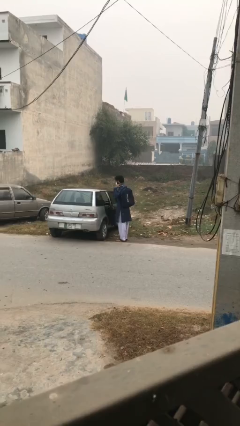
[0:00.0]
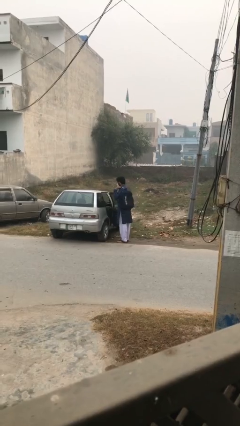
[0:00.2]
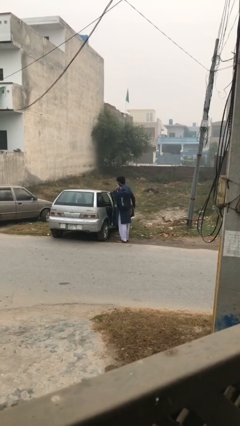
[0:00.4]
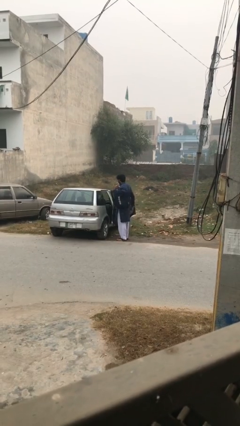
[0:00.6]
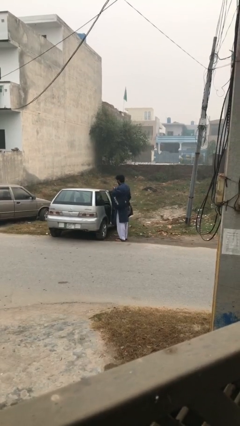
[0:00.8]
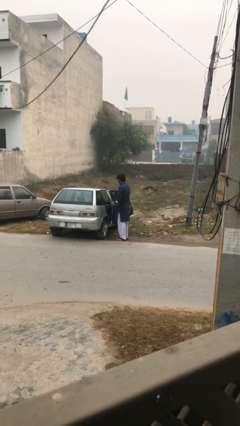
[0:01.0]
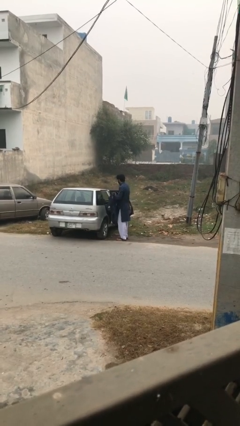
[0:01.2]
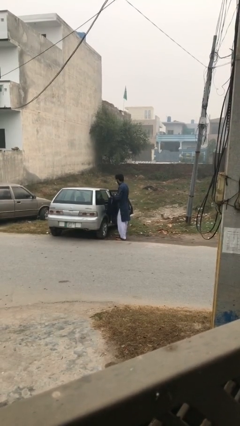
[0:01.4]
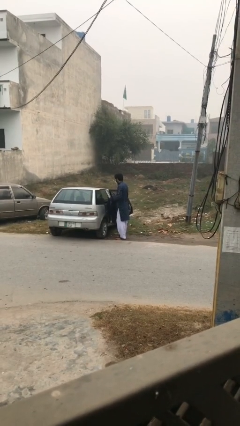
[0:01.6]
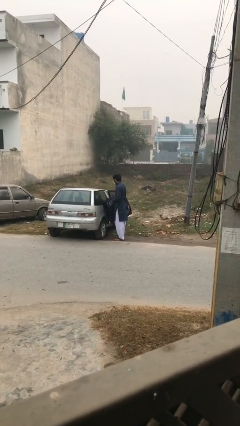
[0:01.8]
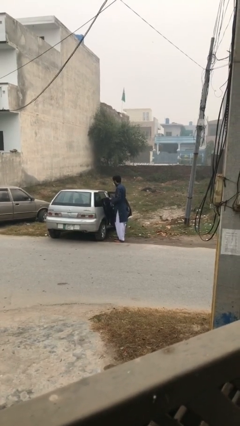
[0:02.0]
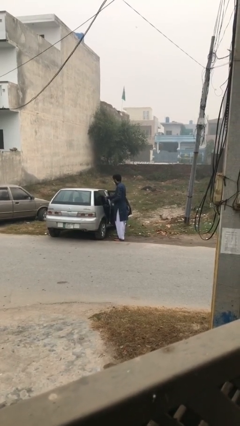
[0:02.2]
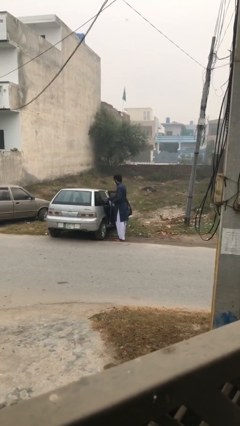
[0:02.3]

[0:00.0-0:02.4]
person loads car

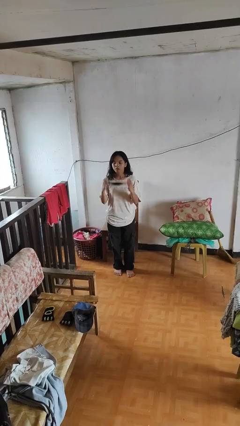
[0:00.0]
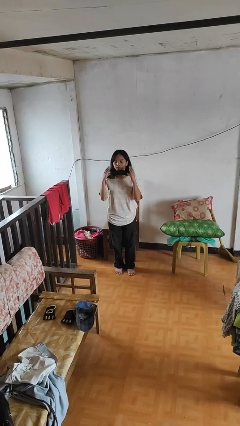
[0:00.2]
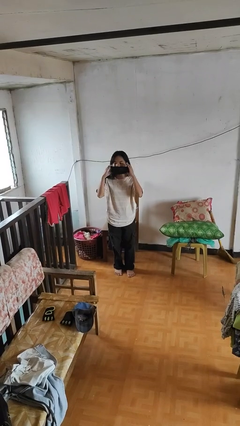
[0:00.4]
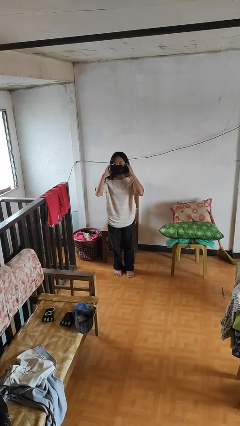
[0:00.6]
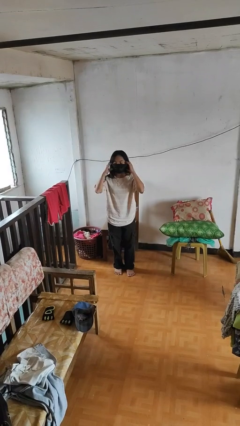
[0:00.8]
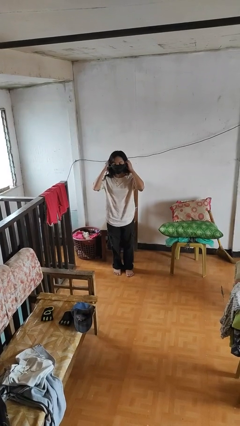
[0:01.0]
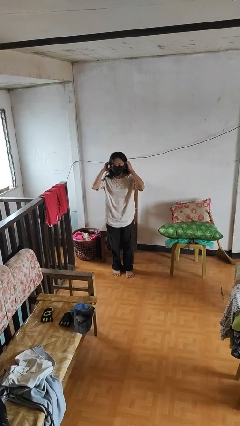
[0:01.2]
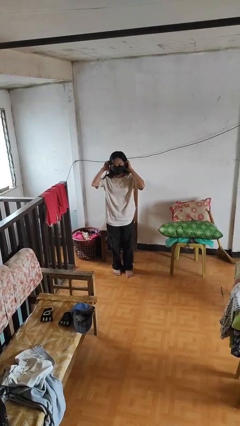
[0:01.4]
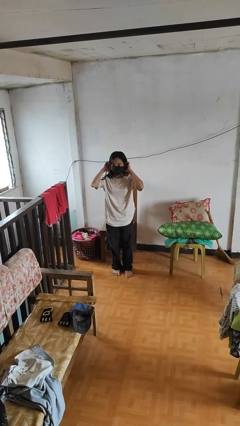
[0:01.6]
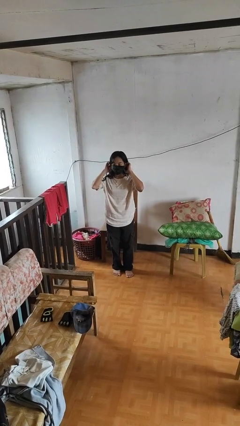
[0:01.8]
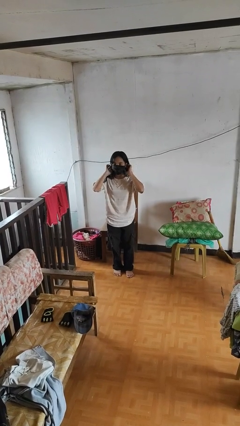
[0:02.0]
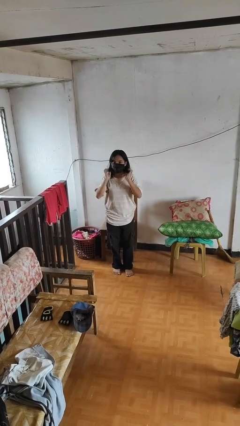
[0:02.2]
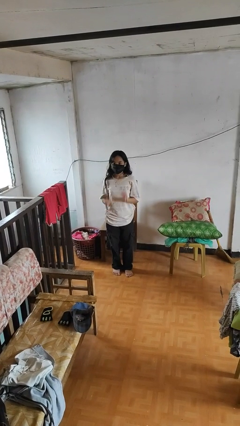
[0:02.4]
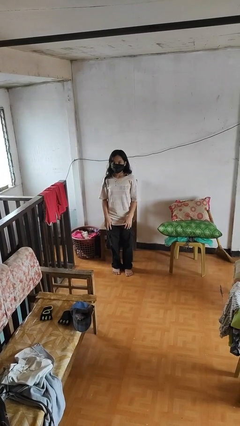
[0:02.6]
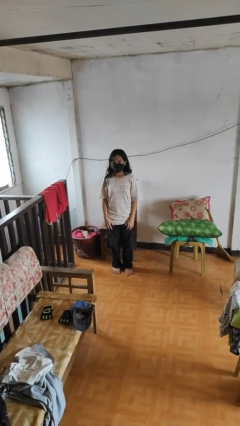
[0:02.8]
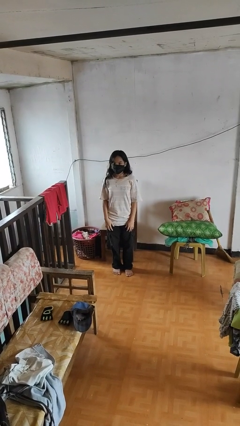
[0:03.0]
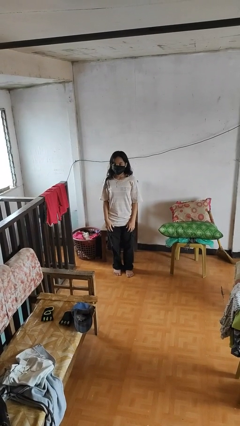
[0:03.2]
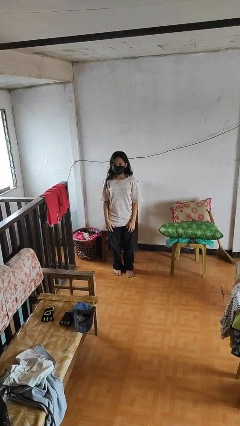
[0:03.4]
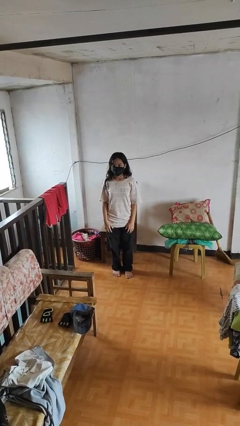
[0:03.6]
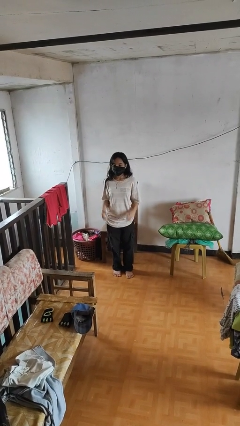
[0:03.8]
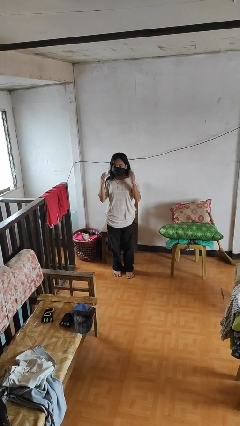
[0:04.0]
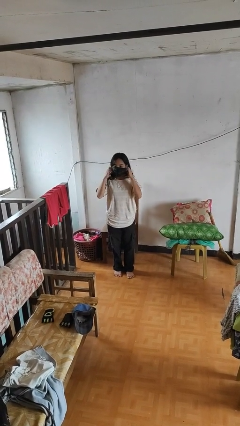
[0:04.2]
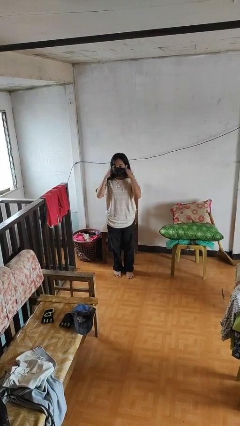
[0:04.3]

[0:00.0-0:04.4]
person puts on facemask

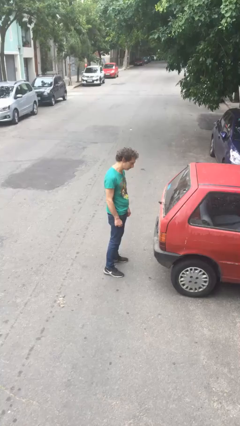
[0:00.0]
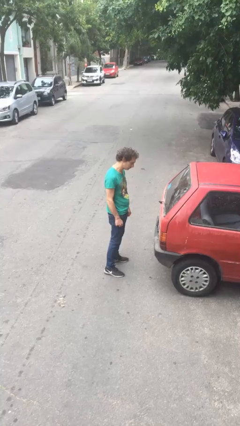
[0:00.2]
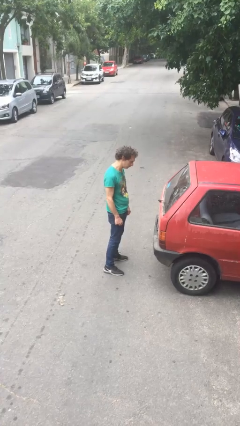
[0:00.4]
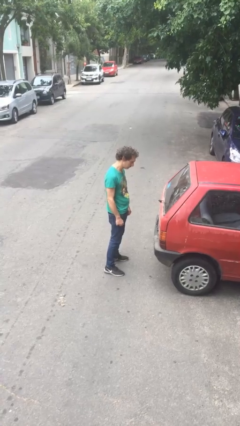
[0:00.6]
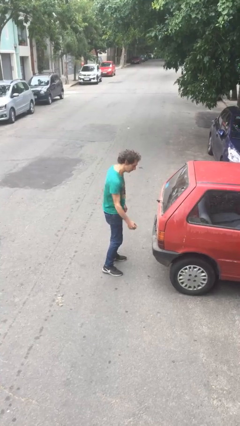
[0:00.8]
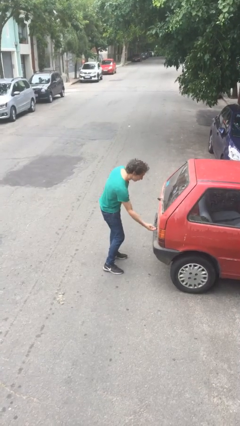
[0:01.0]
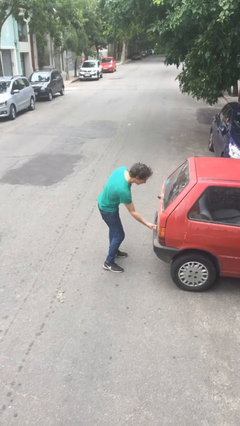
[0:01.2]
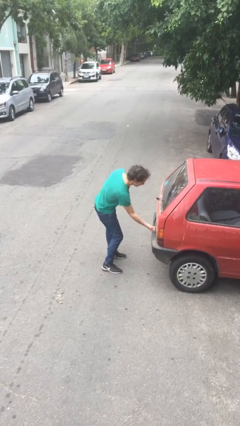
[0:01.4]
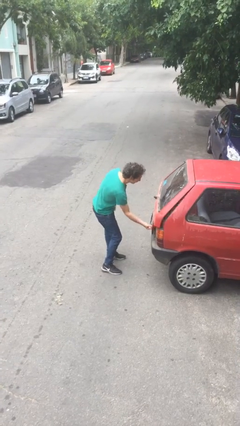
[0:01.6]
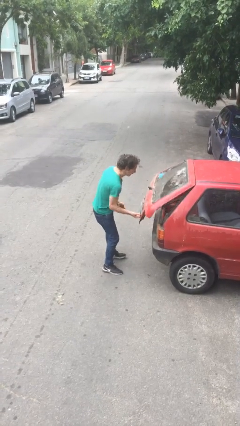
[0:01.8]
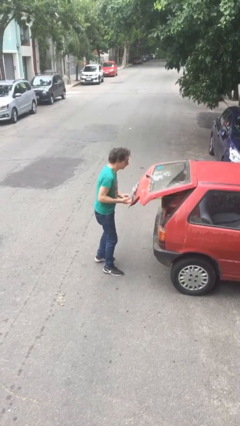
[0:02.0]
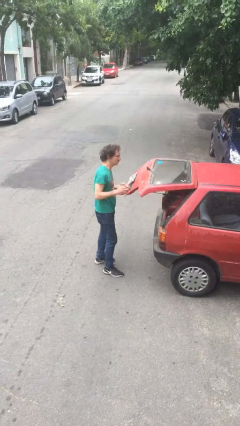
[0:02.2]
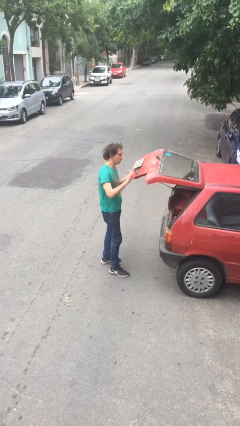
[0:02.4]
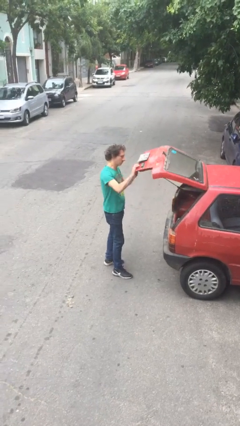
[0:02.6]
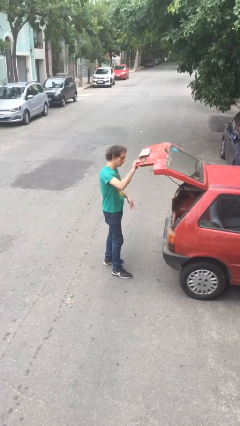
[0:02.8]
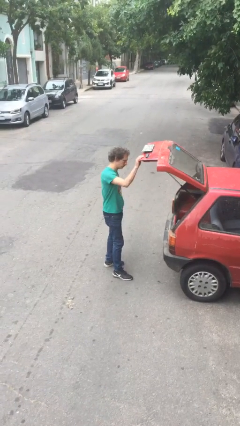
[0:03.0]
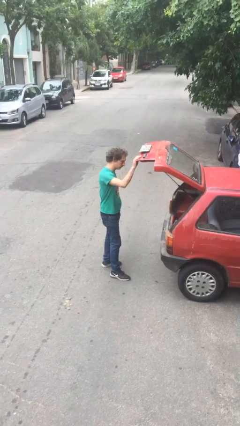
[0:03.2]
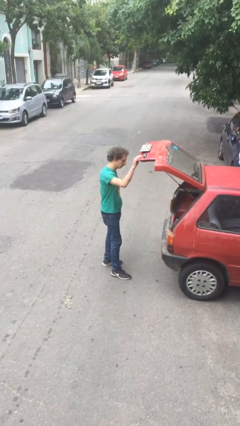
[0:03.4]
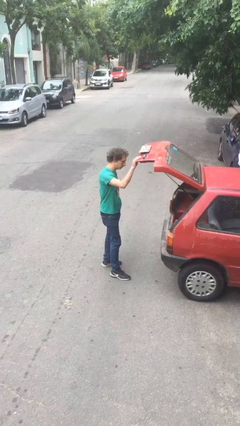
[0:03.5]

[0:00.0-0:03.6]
person opens car trunk

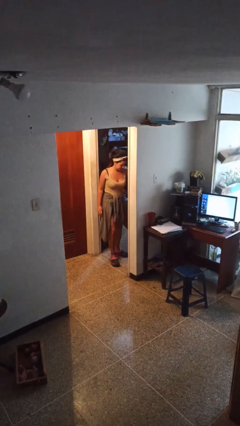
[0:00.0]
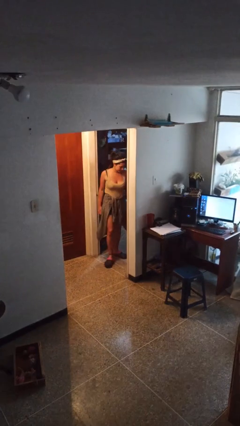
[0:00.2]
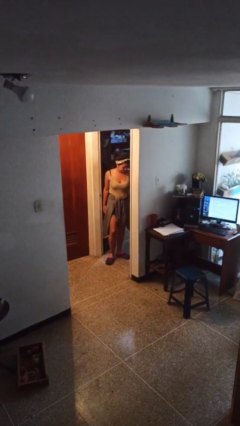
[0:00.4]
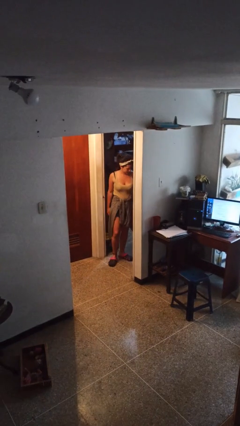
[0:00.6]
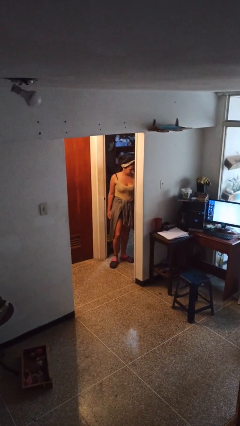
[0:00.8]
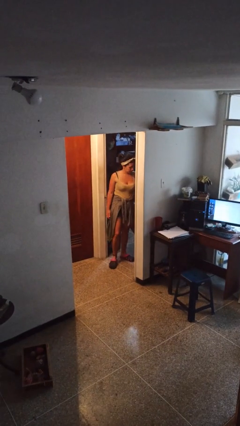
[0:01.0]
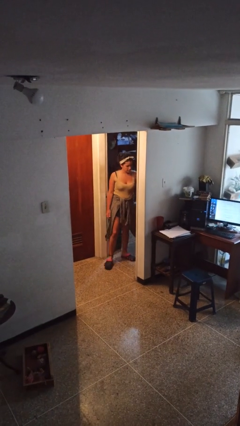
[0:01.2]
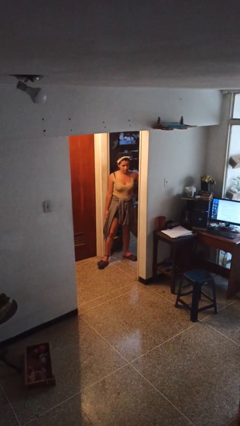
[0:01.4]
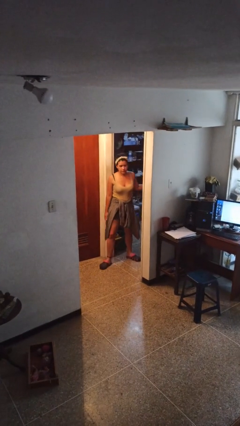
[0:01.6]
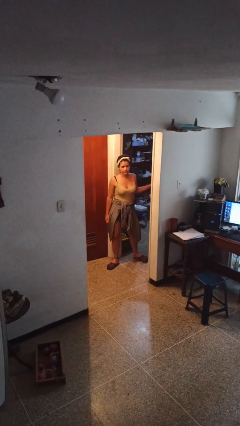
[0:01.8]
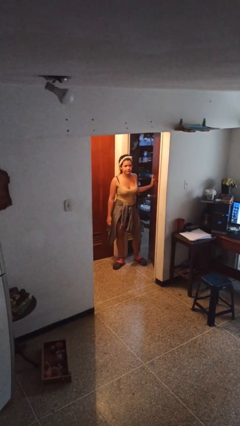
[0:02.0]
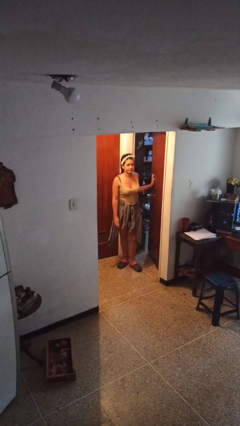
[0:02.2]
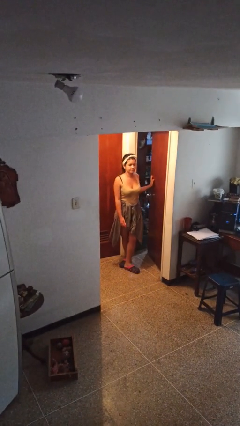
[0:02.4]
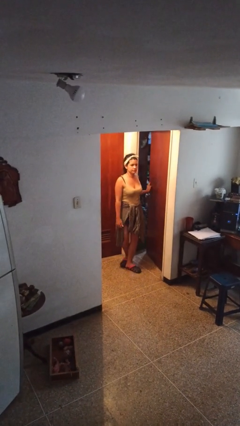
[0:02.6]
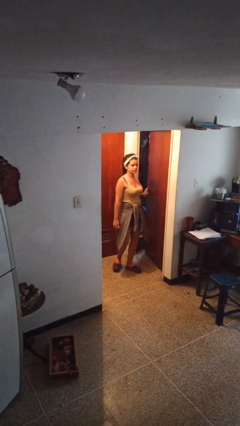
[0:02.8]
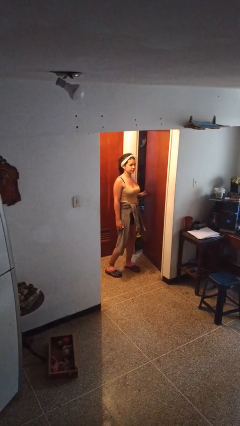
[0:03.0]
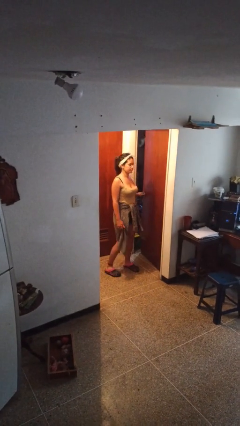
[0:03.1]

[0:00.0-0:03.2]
person closes facility door

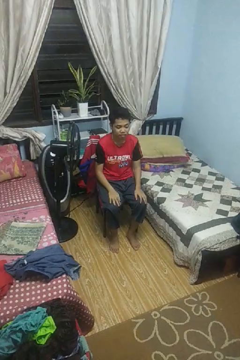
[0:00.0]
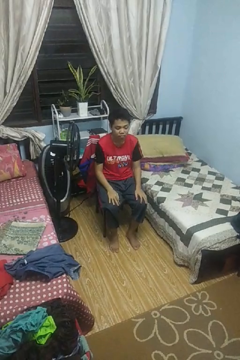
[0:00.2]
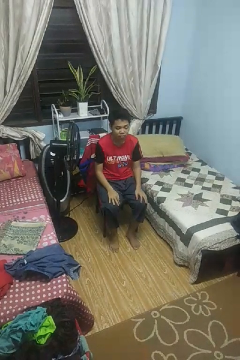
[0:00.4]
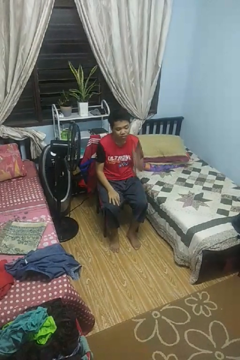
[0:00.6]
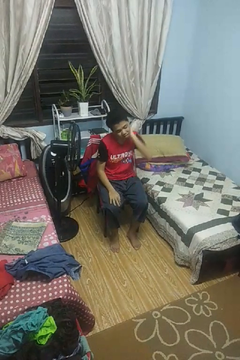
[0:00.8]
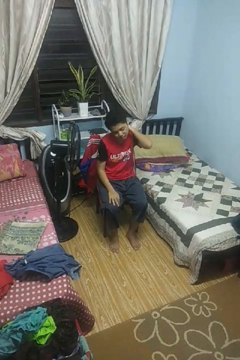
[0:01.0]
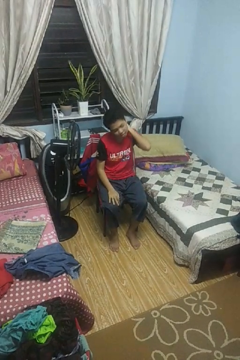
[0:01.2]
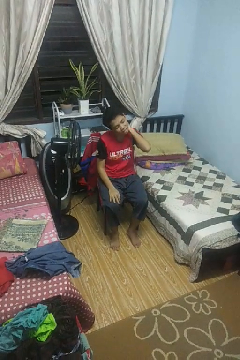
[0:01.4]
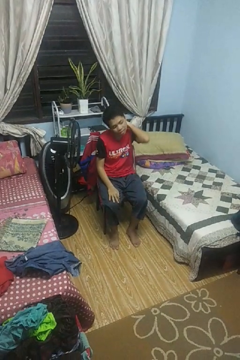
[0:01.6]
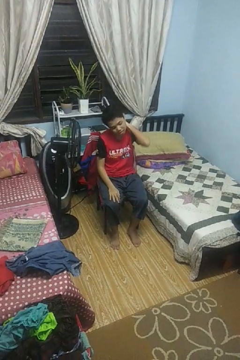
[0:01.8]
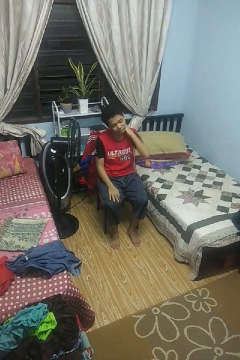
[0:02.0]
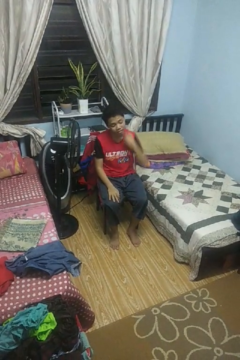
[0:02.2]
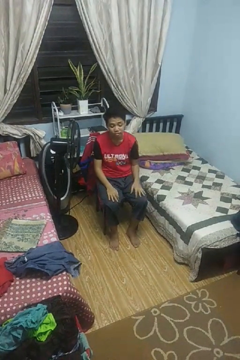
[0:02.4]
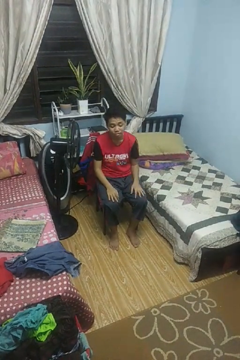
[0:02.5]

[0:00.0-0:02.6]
person rubs neck

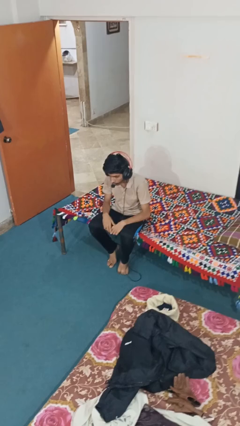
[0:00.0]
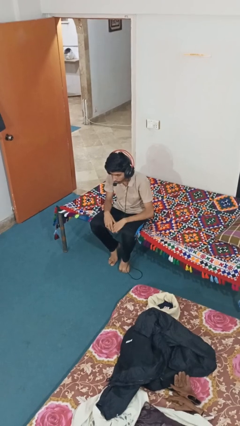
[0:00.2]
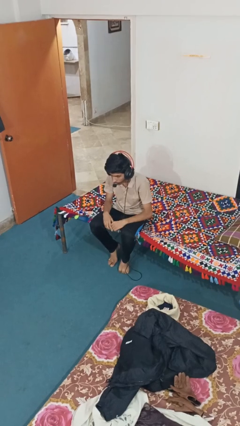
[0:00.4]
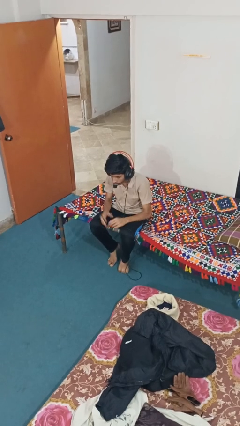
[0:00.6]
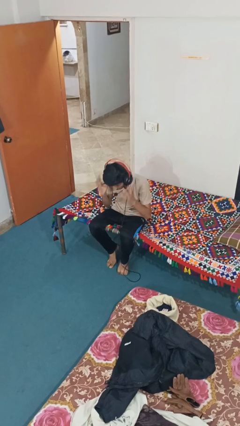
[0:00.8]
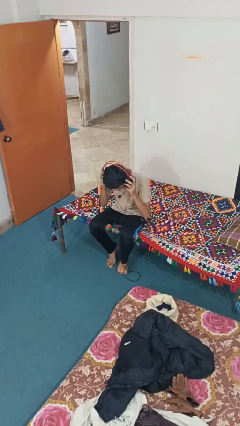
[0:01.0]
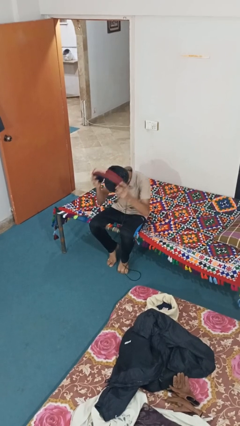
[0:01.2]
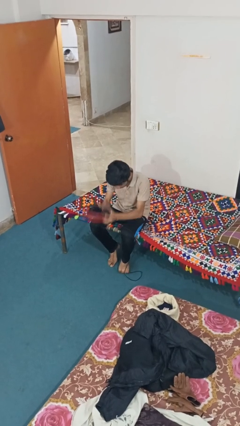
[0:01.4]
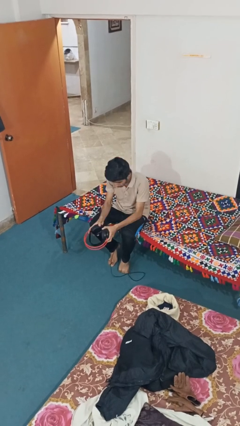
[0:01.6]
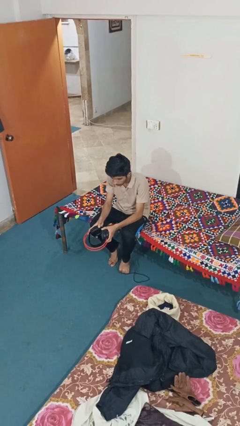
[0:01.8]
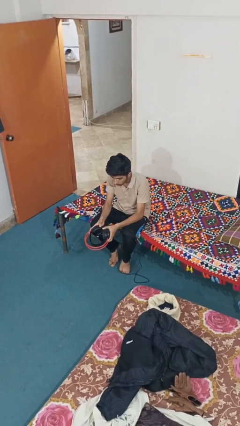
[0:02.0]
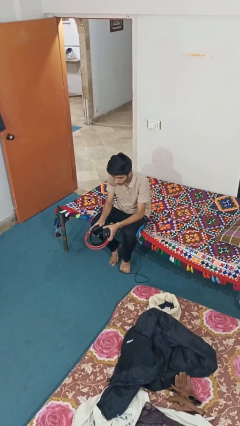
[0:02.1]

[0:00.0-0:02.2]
person takes off headphones
